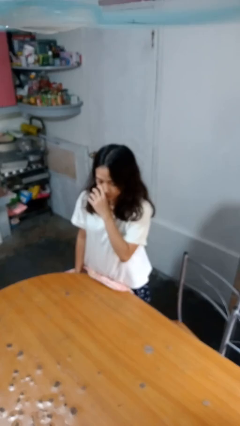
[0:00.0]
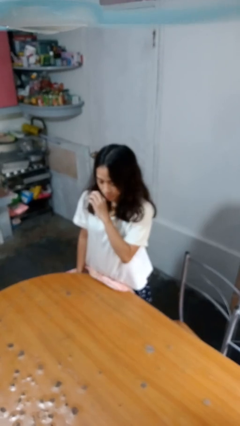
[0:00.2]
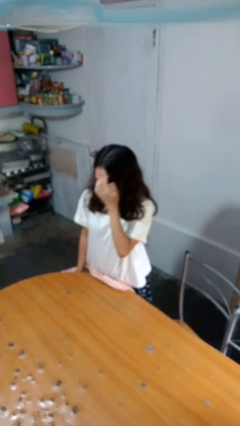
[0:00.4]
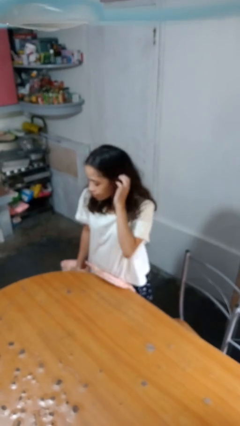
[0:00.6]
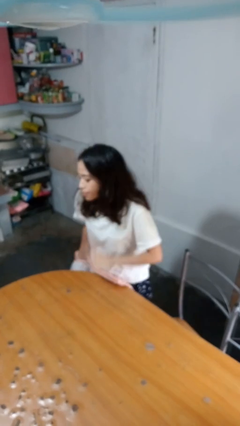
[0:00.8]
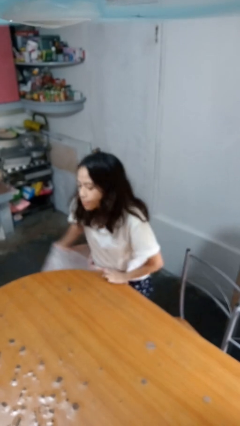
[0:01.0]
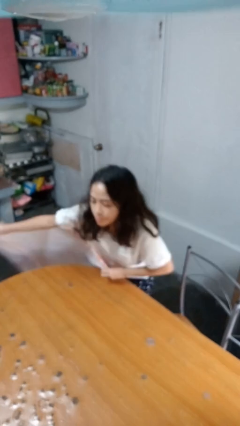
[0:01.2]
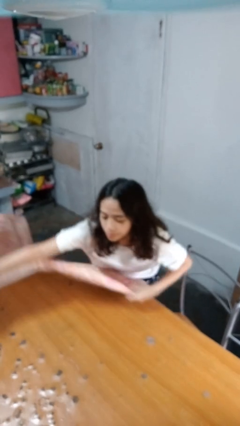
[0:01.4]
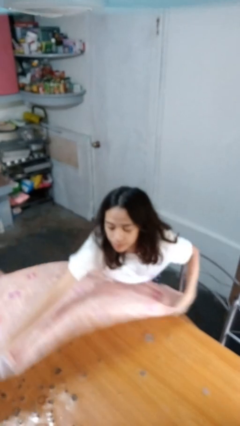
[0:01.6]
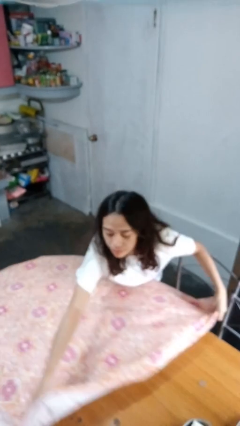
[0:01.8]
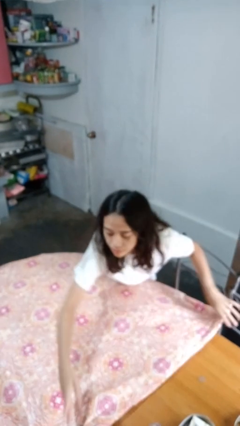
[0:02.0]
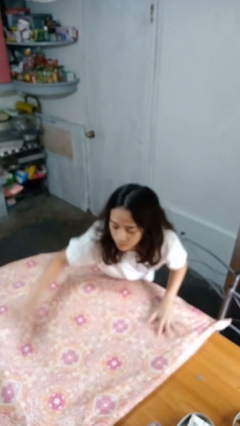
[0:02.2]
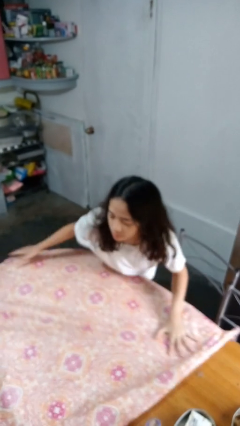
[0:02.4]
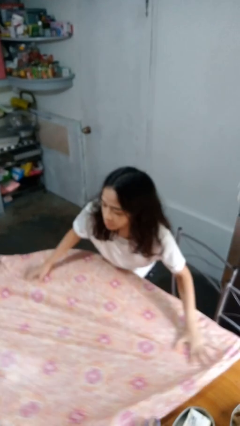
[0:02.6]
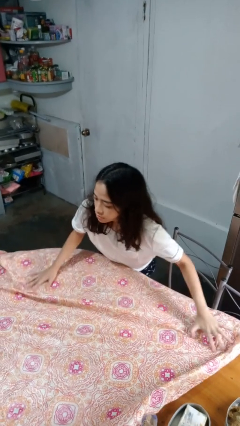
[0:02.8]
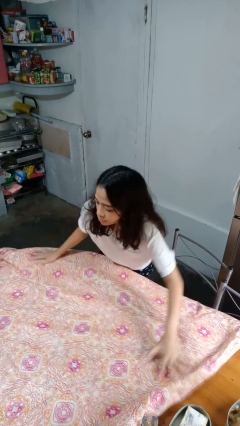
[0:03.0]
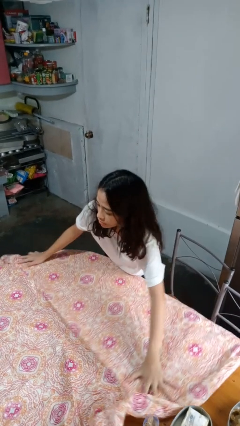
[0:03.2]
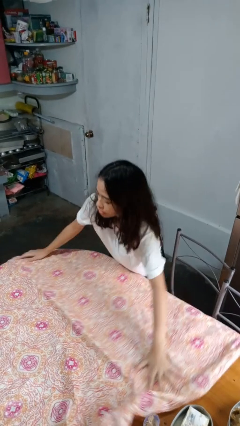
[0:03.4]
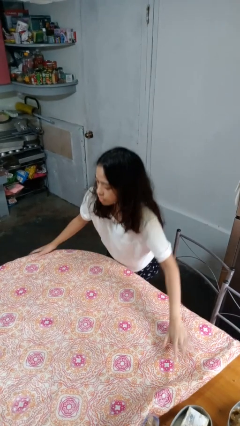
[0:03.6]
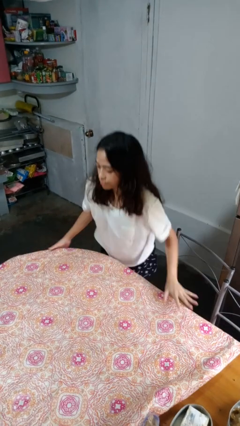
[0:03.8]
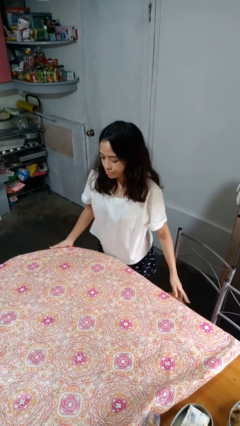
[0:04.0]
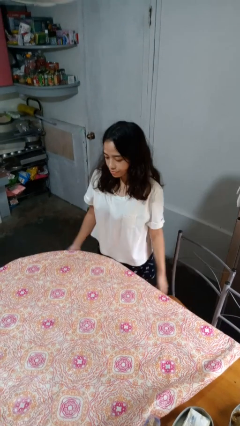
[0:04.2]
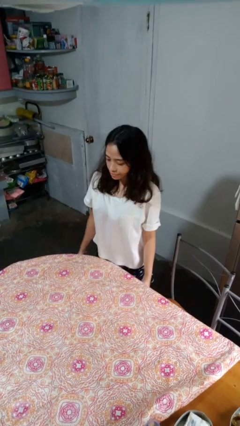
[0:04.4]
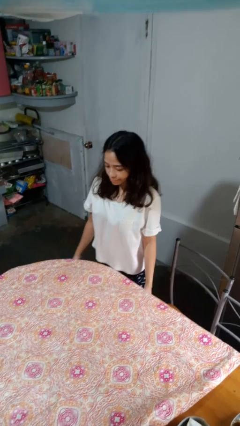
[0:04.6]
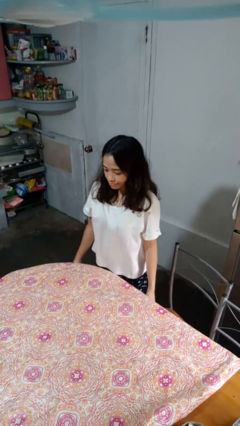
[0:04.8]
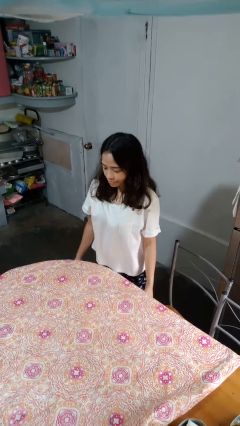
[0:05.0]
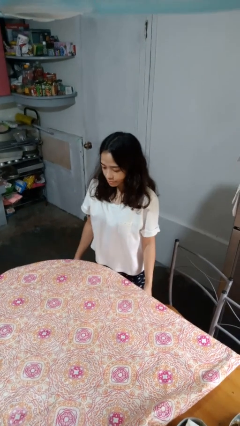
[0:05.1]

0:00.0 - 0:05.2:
person spreads tablecloth

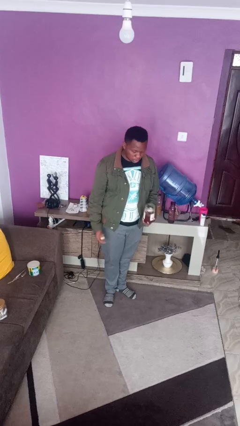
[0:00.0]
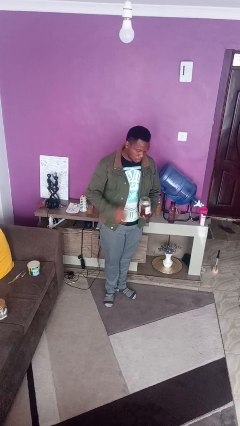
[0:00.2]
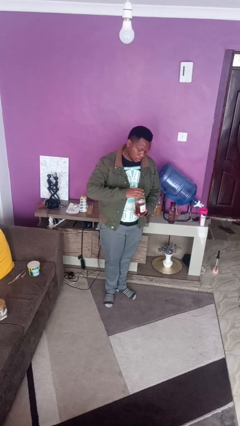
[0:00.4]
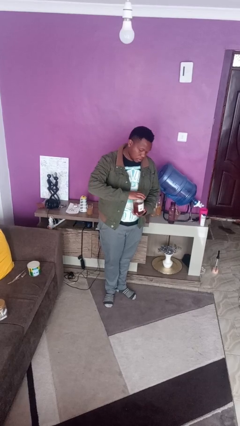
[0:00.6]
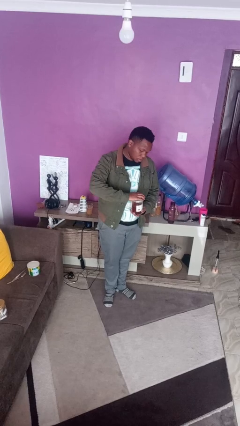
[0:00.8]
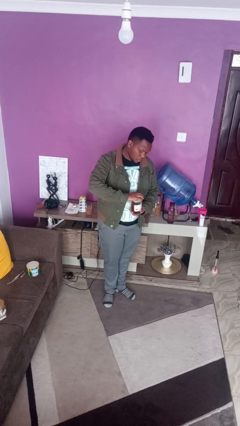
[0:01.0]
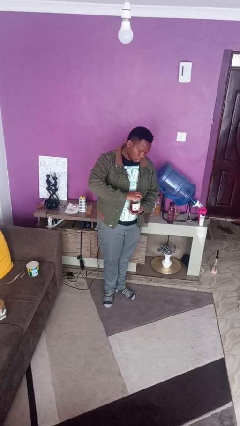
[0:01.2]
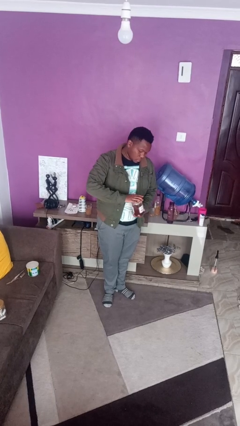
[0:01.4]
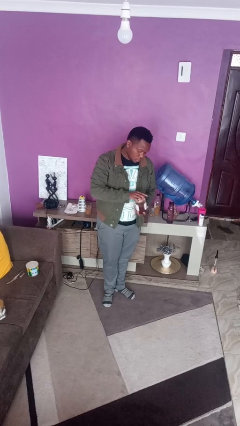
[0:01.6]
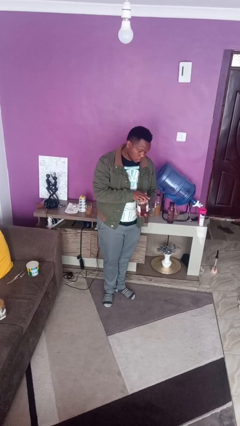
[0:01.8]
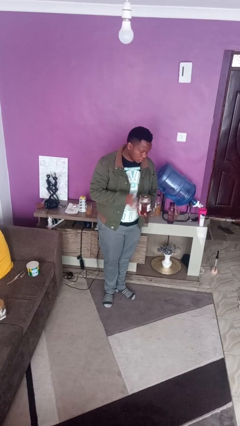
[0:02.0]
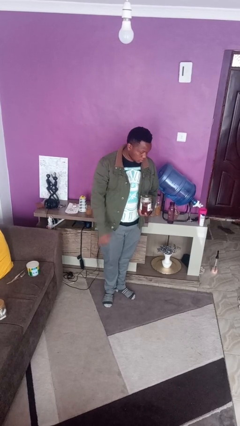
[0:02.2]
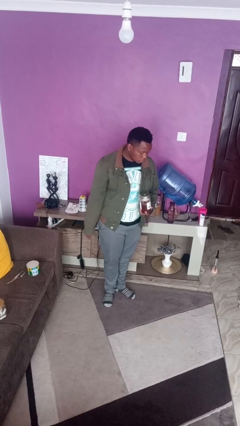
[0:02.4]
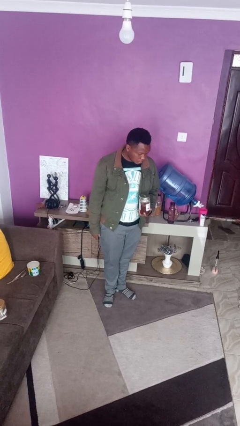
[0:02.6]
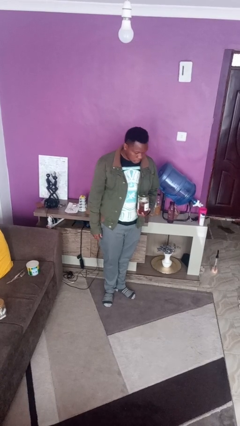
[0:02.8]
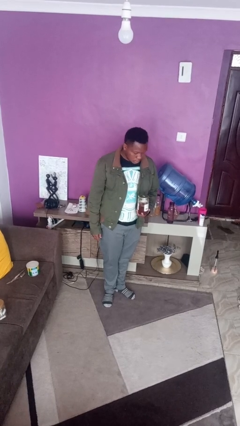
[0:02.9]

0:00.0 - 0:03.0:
person closes jar

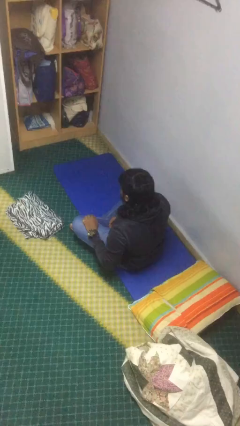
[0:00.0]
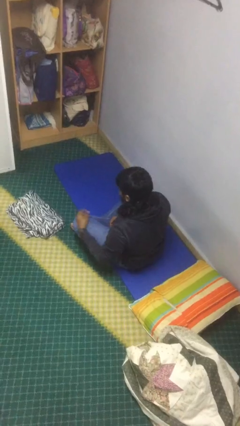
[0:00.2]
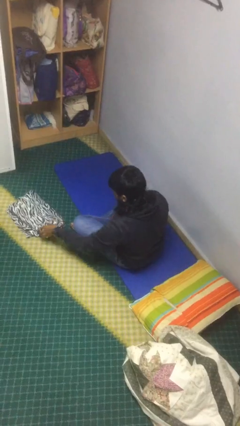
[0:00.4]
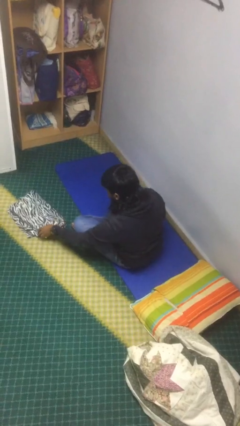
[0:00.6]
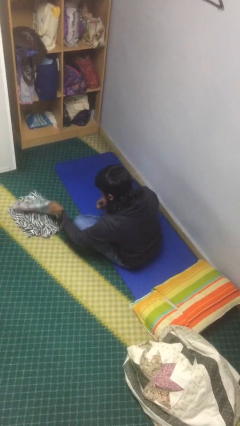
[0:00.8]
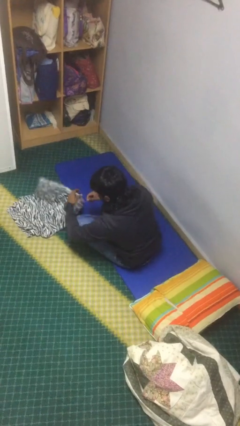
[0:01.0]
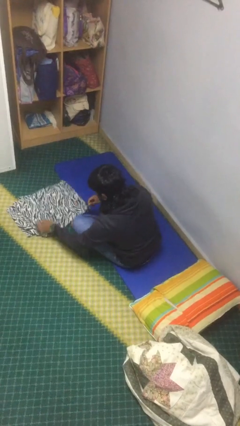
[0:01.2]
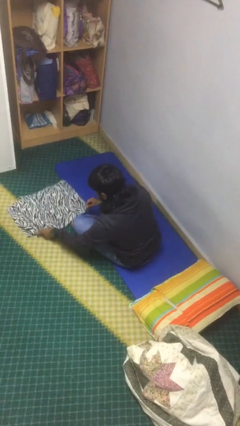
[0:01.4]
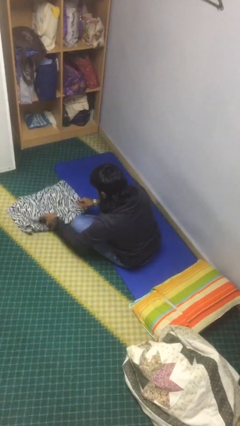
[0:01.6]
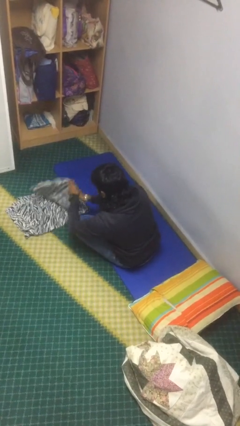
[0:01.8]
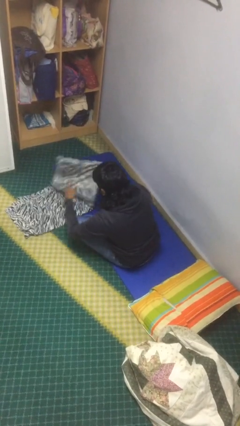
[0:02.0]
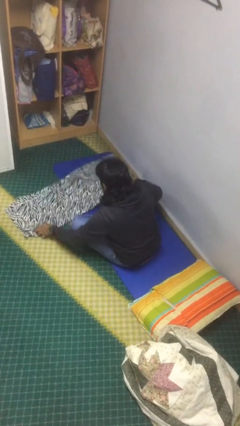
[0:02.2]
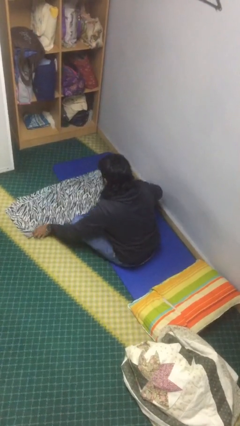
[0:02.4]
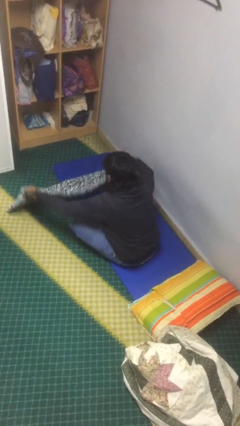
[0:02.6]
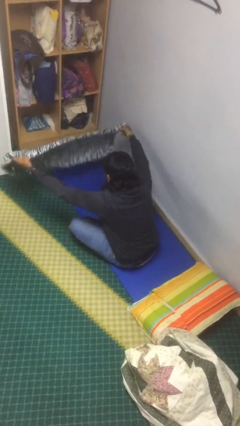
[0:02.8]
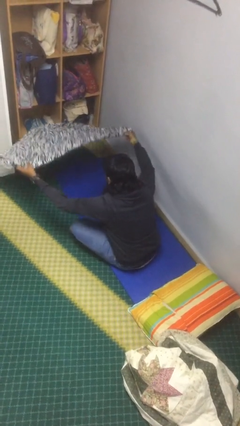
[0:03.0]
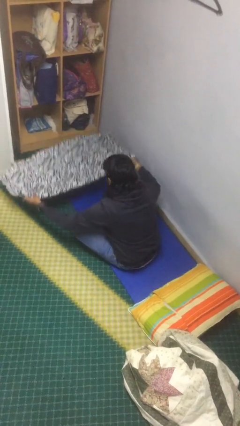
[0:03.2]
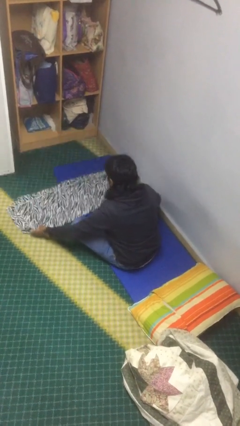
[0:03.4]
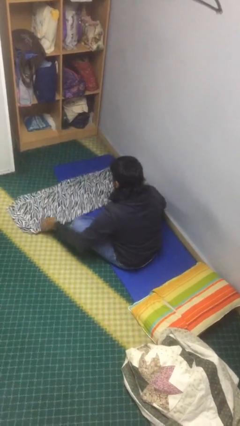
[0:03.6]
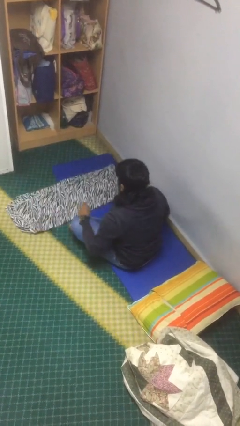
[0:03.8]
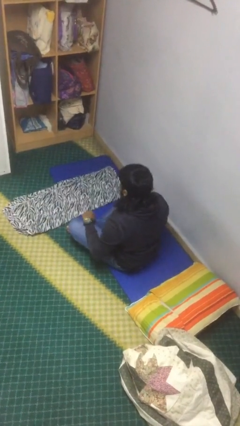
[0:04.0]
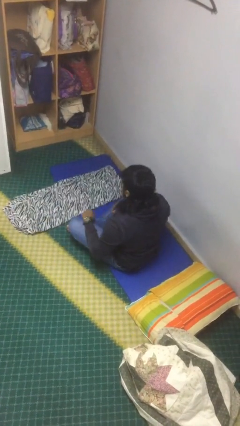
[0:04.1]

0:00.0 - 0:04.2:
person unfolds blanket

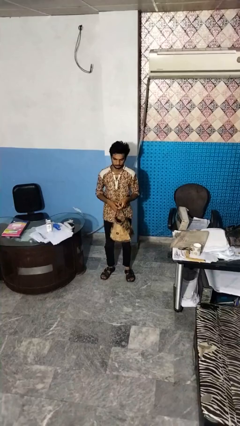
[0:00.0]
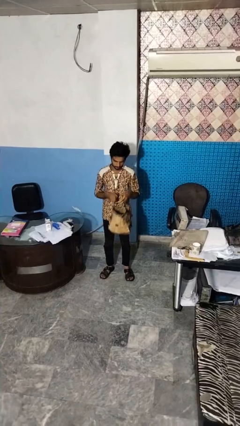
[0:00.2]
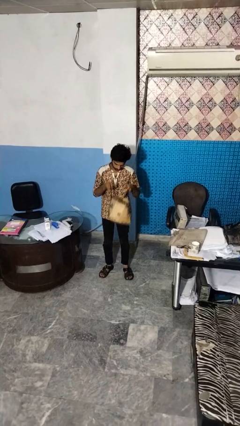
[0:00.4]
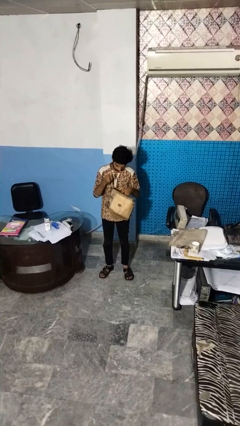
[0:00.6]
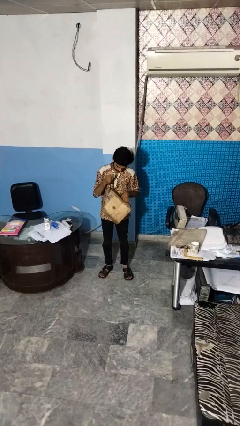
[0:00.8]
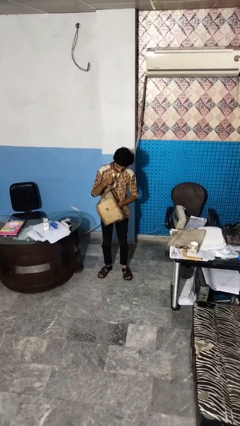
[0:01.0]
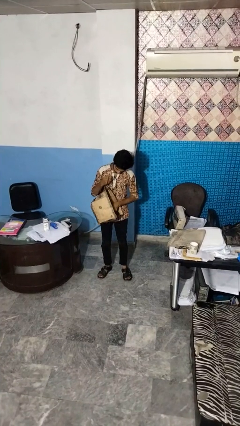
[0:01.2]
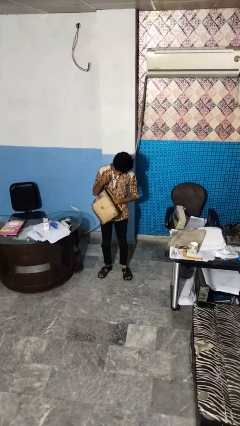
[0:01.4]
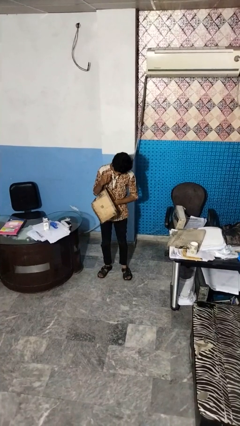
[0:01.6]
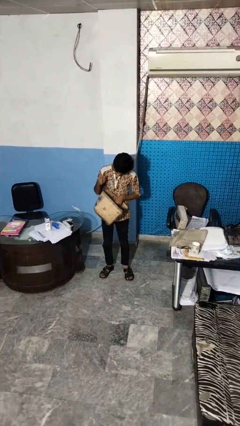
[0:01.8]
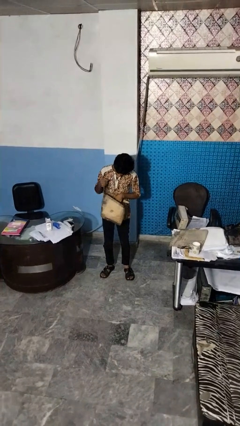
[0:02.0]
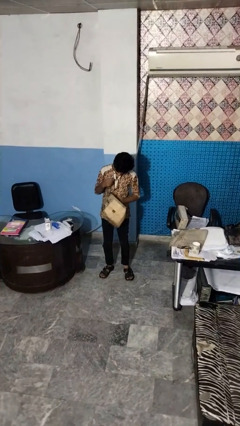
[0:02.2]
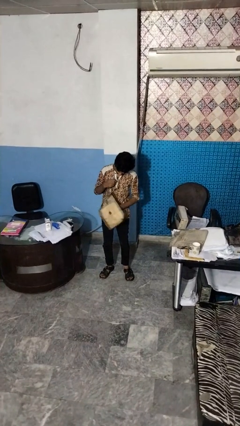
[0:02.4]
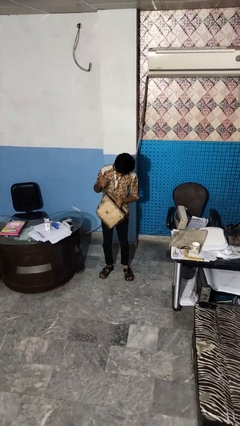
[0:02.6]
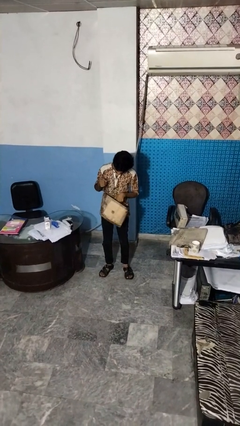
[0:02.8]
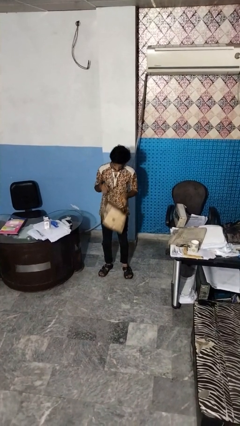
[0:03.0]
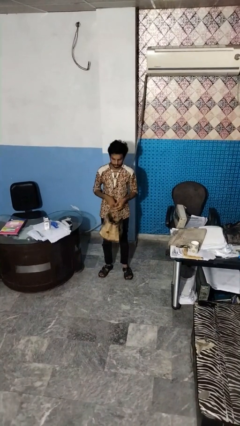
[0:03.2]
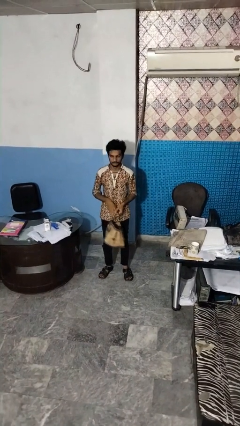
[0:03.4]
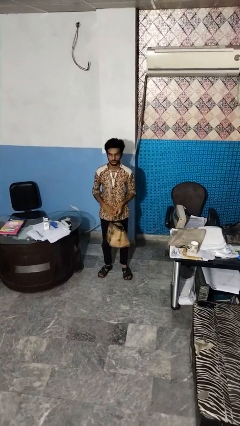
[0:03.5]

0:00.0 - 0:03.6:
person searches in bag

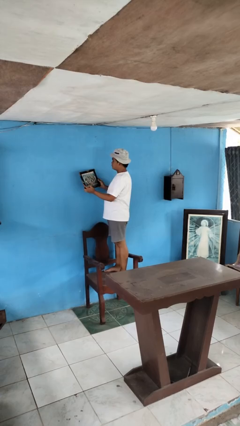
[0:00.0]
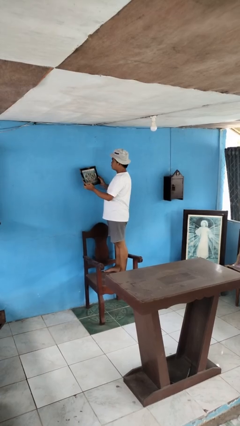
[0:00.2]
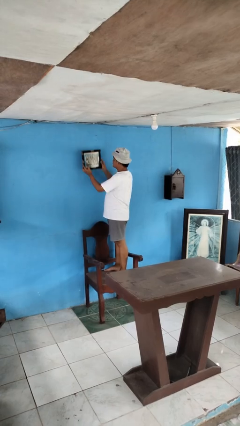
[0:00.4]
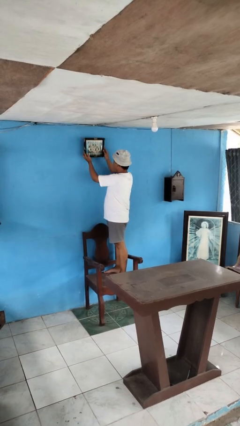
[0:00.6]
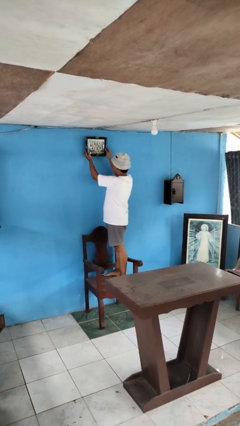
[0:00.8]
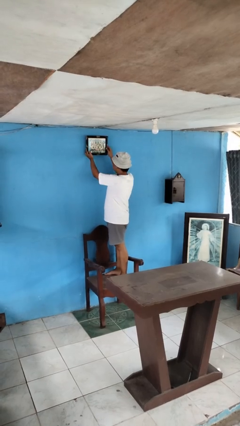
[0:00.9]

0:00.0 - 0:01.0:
person puts up picture frame

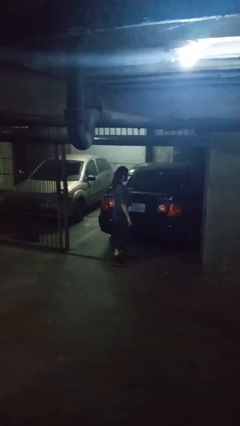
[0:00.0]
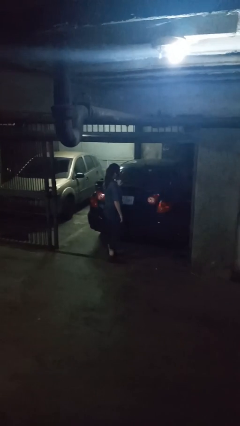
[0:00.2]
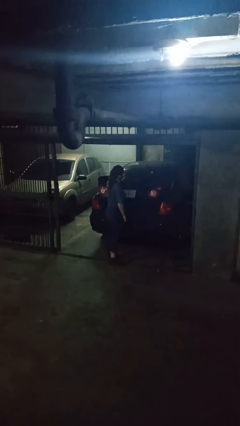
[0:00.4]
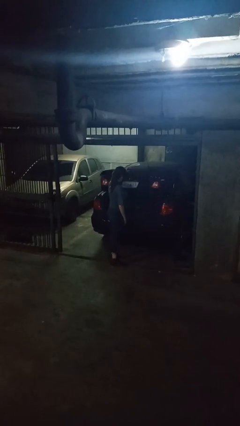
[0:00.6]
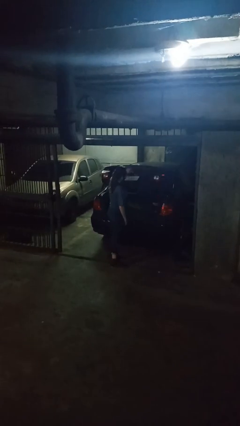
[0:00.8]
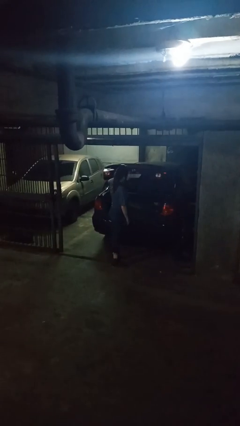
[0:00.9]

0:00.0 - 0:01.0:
person opens car trunk
